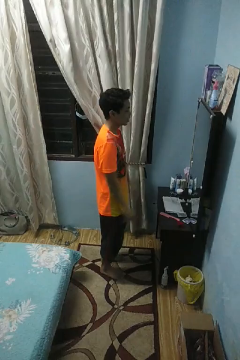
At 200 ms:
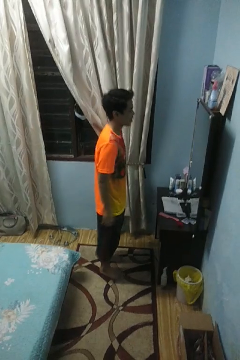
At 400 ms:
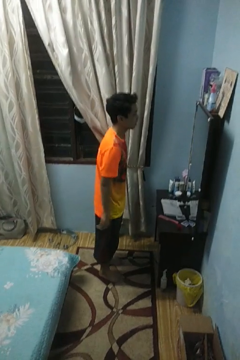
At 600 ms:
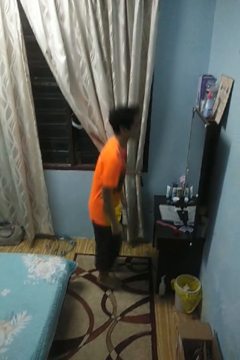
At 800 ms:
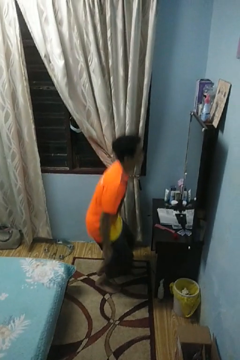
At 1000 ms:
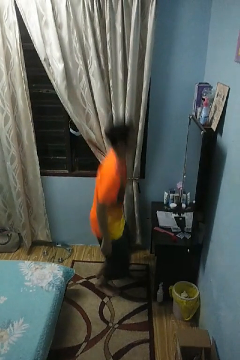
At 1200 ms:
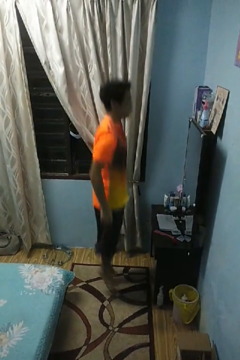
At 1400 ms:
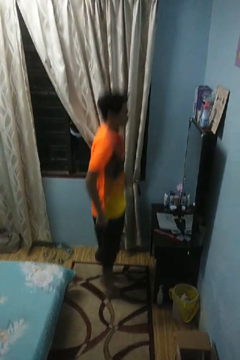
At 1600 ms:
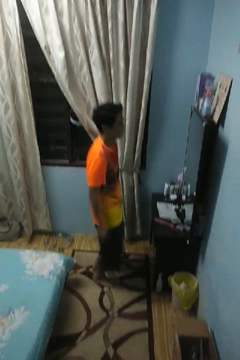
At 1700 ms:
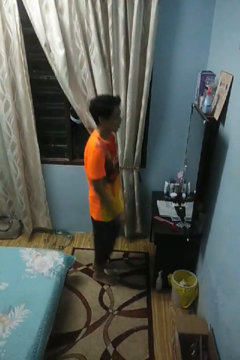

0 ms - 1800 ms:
person jumps

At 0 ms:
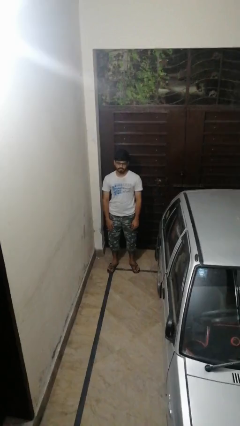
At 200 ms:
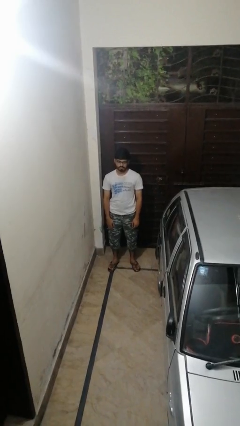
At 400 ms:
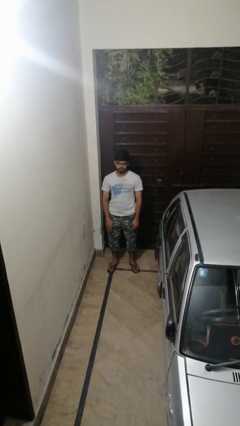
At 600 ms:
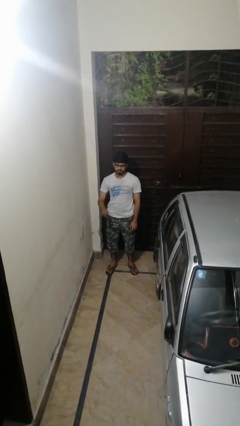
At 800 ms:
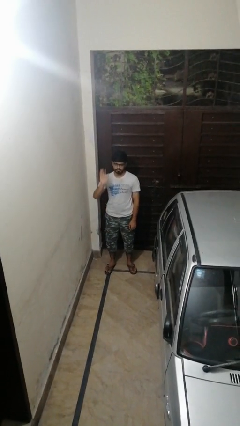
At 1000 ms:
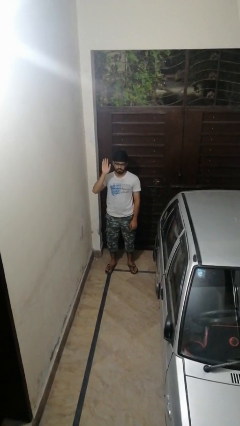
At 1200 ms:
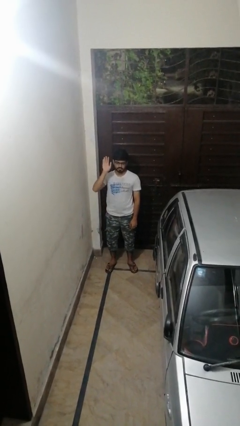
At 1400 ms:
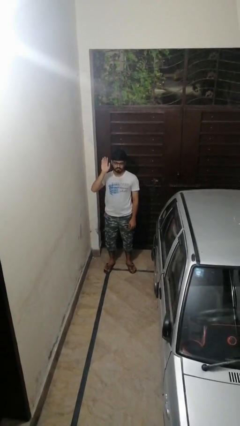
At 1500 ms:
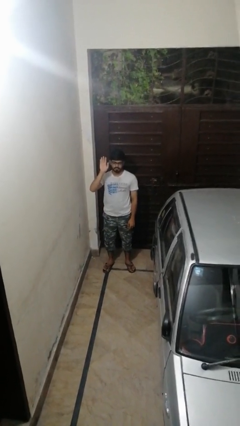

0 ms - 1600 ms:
person gestures raise hand

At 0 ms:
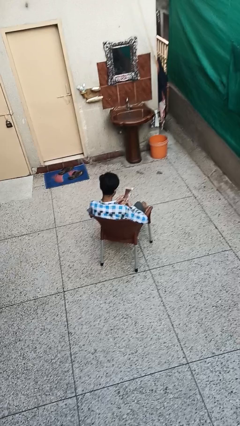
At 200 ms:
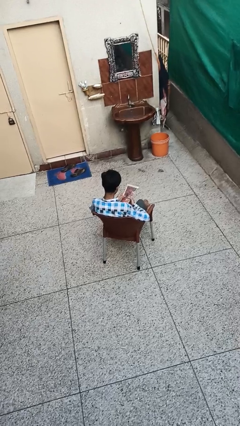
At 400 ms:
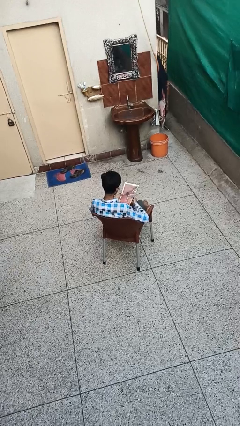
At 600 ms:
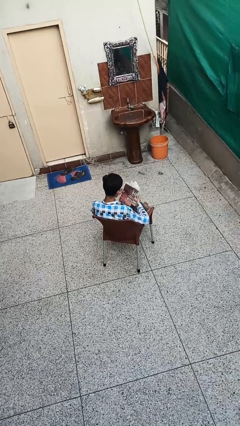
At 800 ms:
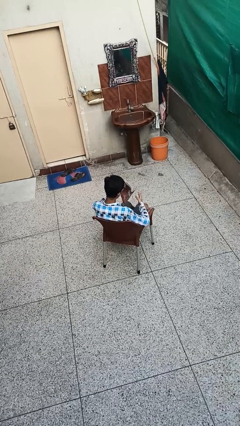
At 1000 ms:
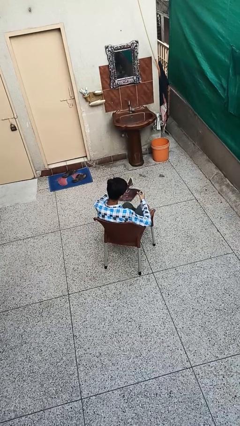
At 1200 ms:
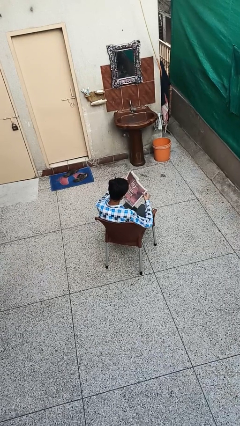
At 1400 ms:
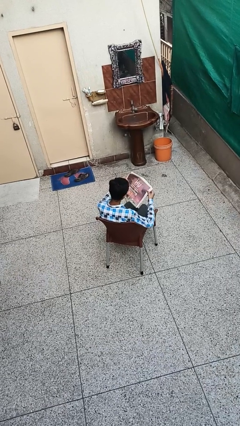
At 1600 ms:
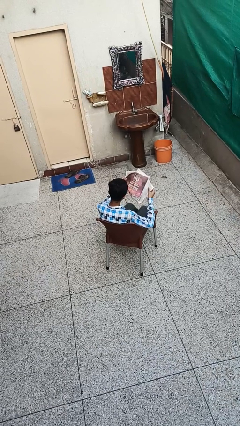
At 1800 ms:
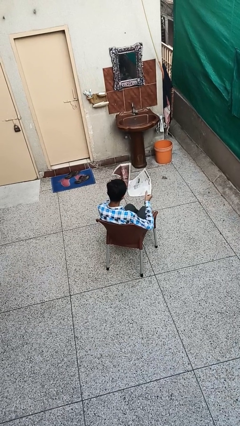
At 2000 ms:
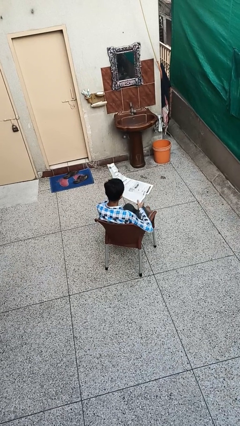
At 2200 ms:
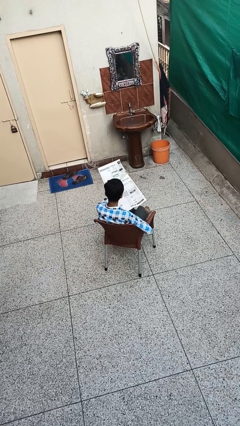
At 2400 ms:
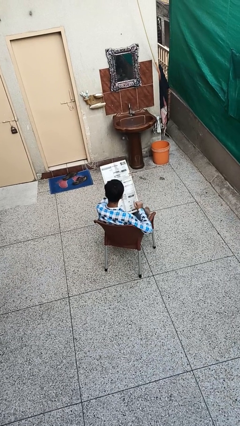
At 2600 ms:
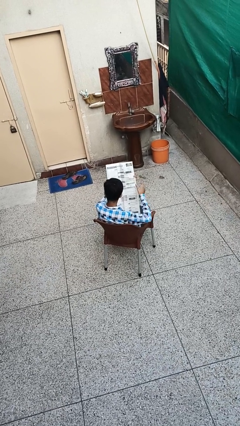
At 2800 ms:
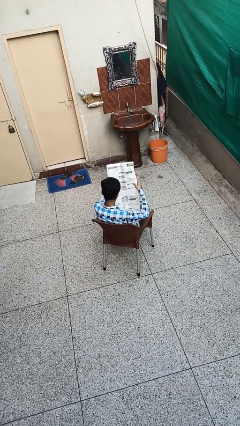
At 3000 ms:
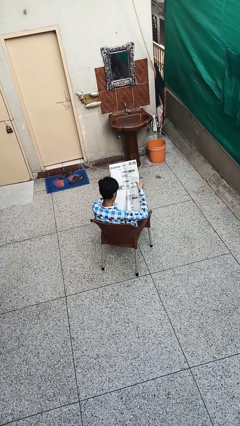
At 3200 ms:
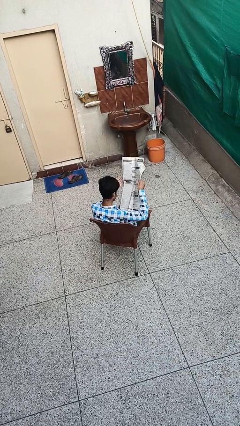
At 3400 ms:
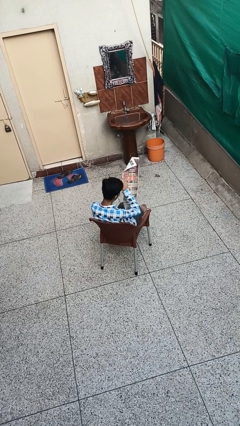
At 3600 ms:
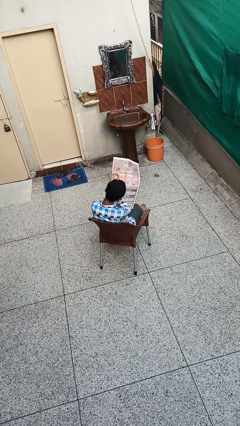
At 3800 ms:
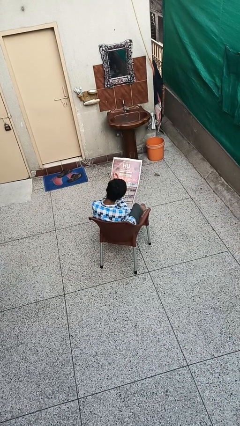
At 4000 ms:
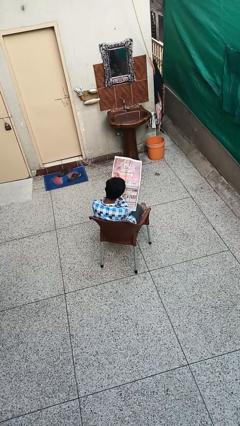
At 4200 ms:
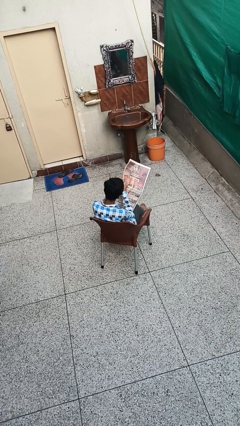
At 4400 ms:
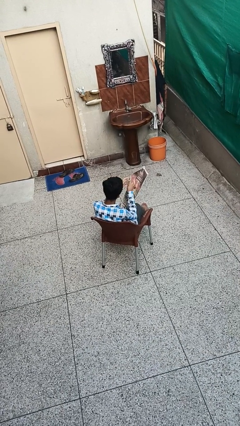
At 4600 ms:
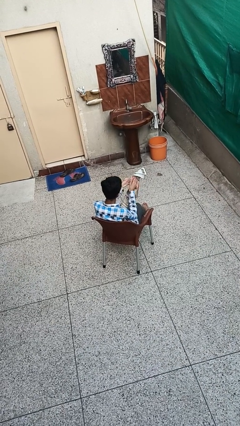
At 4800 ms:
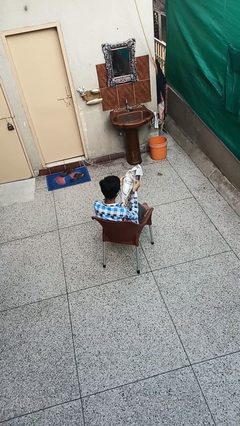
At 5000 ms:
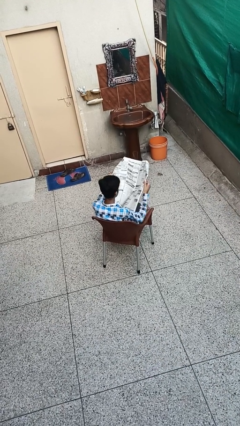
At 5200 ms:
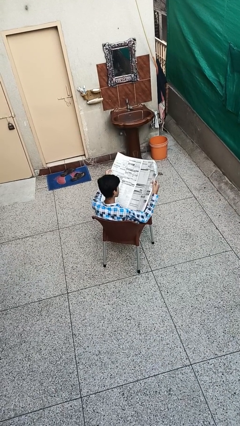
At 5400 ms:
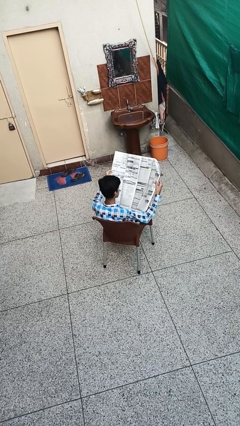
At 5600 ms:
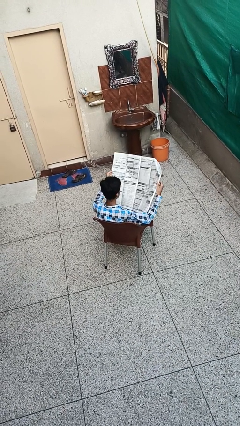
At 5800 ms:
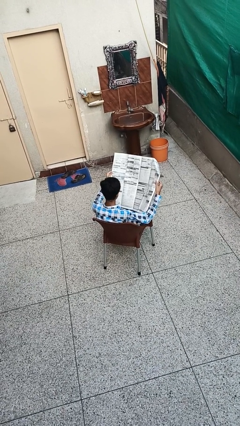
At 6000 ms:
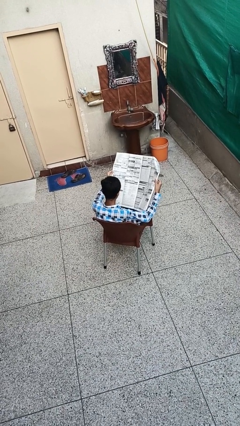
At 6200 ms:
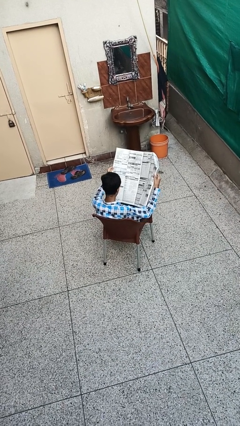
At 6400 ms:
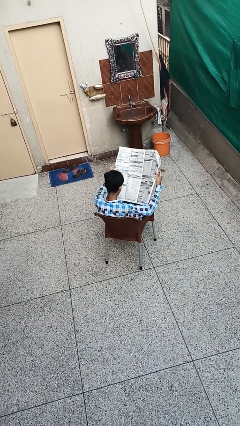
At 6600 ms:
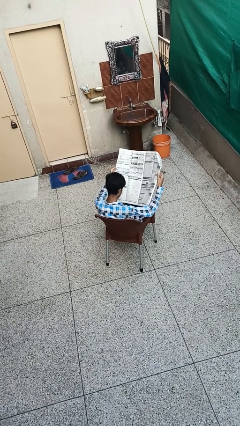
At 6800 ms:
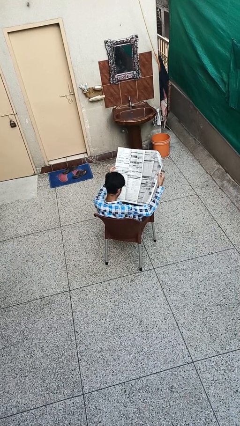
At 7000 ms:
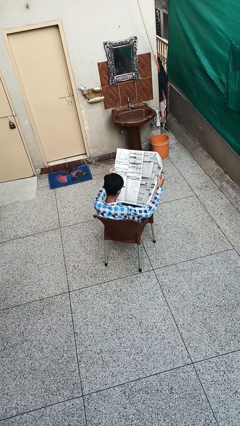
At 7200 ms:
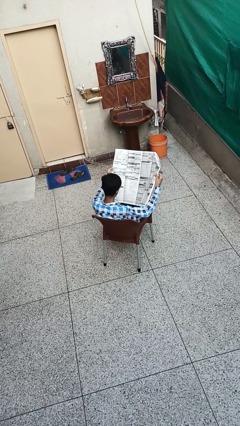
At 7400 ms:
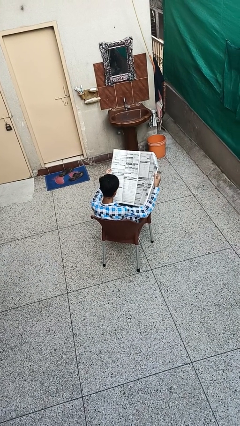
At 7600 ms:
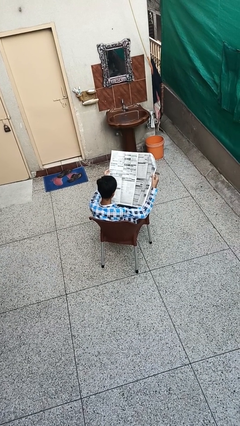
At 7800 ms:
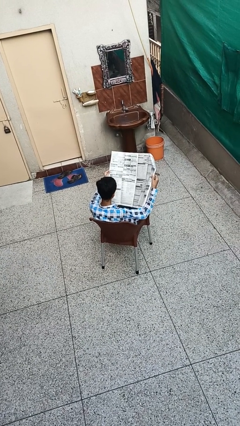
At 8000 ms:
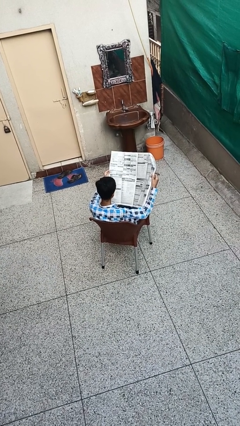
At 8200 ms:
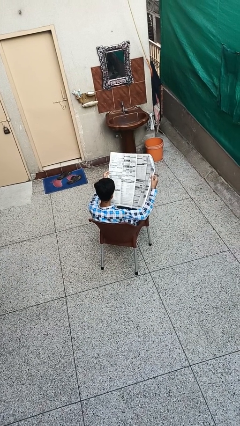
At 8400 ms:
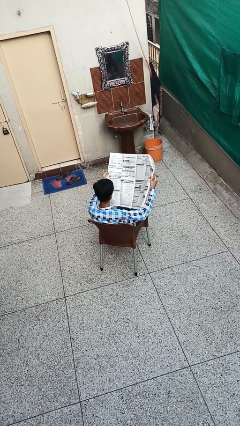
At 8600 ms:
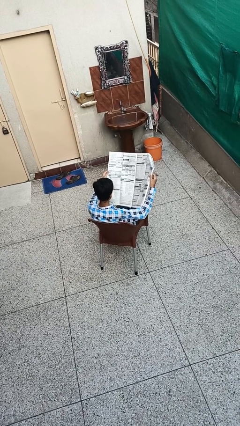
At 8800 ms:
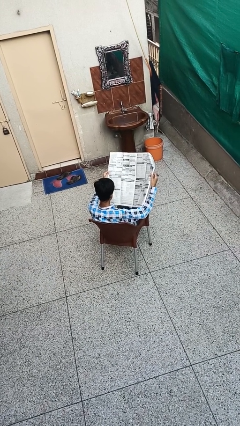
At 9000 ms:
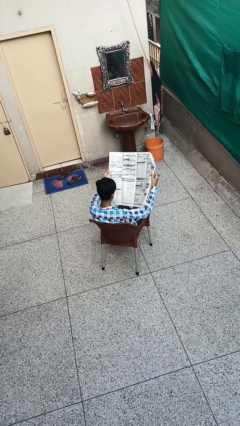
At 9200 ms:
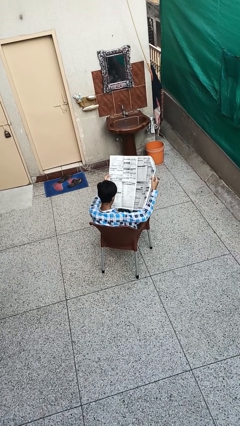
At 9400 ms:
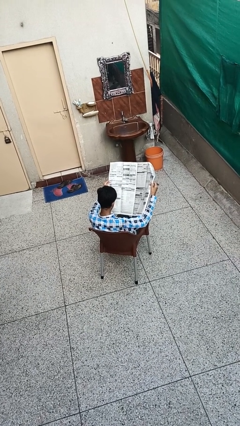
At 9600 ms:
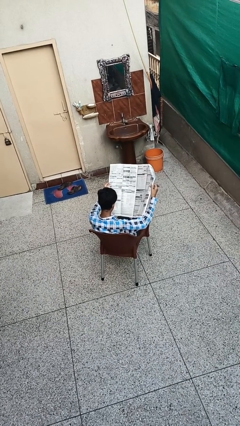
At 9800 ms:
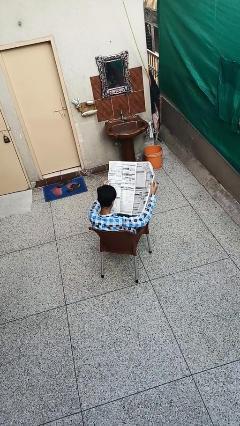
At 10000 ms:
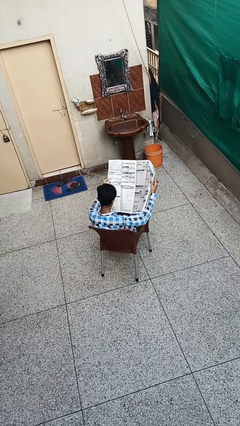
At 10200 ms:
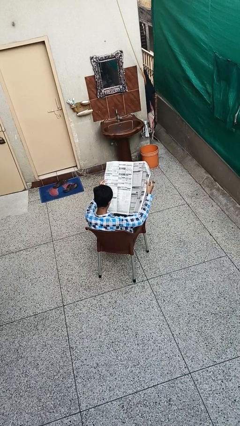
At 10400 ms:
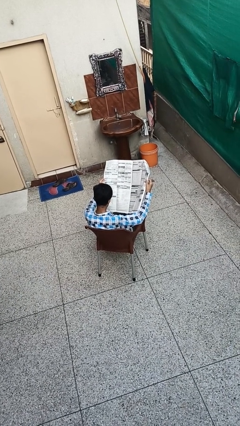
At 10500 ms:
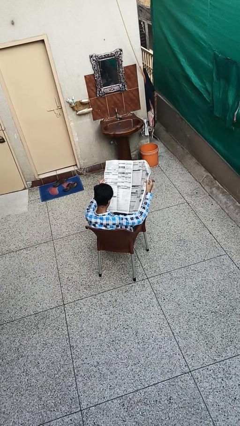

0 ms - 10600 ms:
person reads newspaper

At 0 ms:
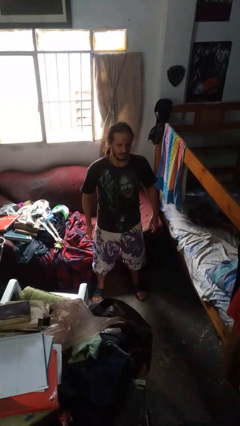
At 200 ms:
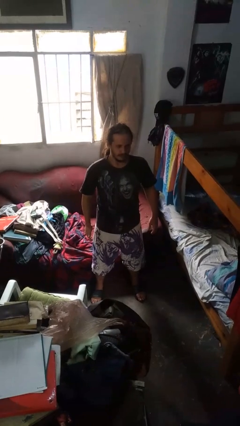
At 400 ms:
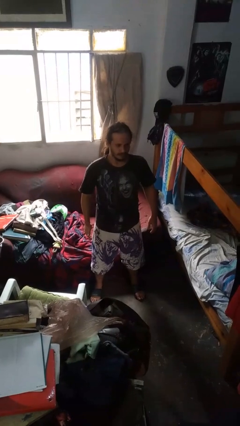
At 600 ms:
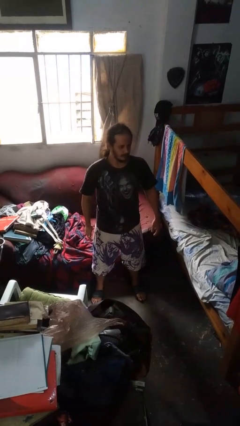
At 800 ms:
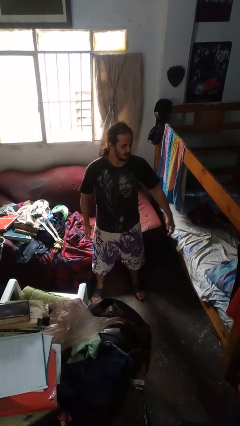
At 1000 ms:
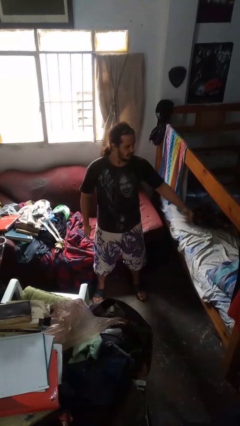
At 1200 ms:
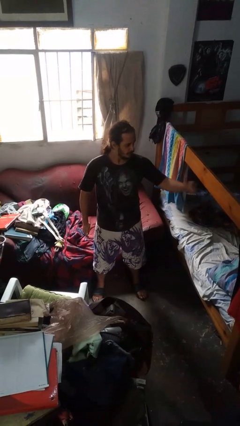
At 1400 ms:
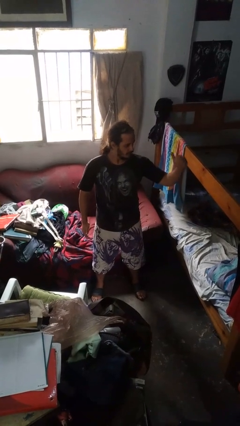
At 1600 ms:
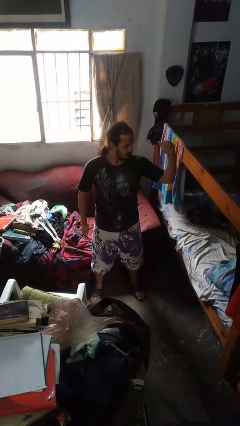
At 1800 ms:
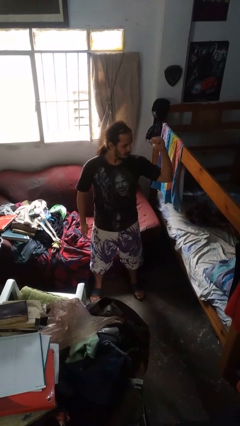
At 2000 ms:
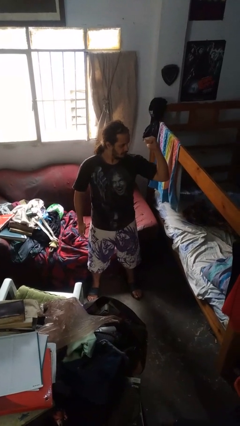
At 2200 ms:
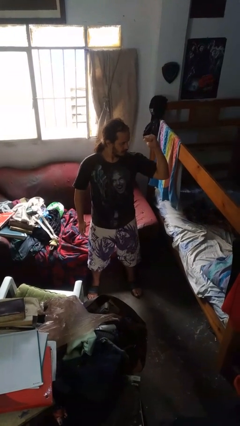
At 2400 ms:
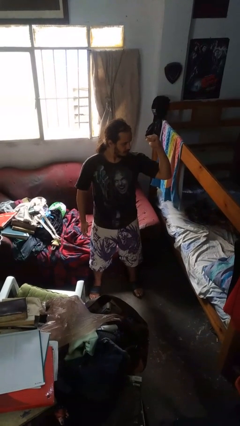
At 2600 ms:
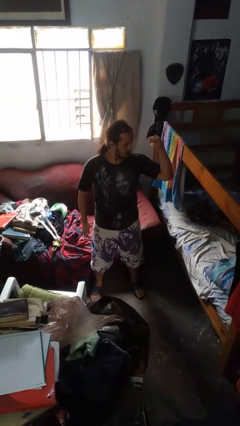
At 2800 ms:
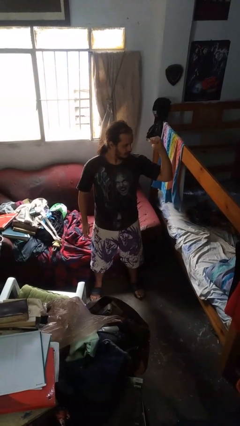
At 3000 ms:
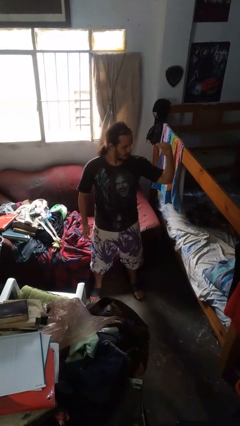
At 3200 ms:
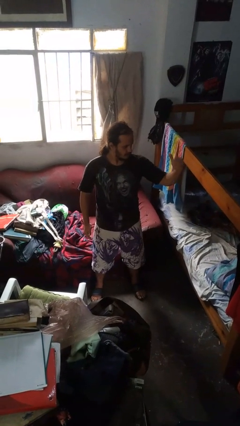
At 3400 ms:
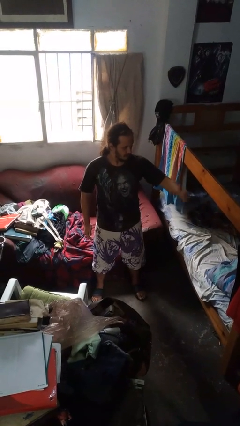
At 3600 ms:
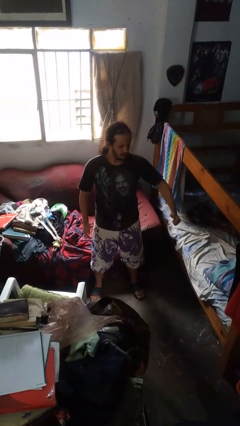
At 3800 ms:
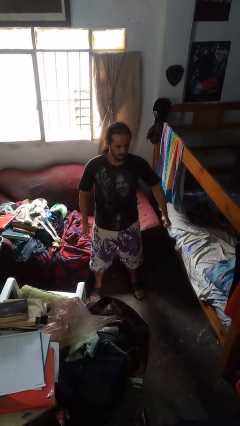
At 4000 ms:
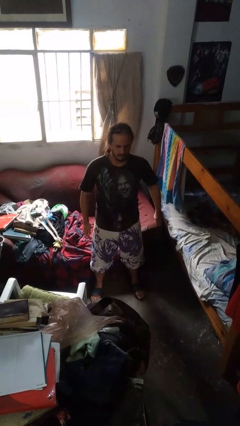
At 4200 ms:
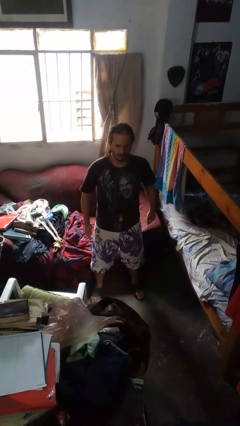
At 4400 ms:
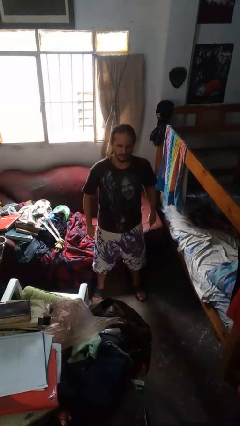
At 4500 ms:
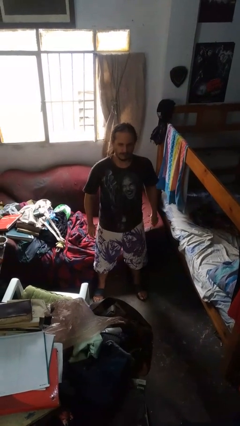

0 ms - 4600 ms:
person gestures behind me
